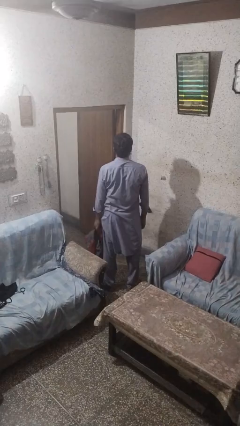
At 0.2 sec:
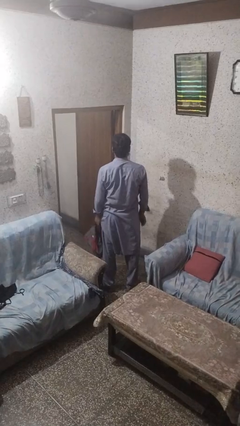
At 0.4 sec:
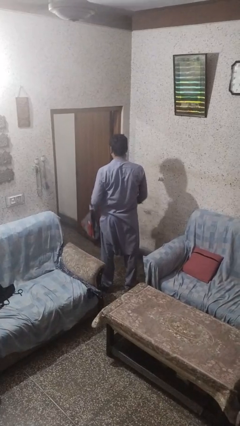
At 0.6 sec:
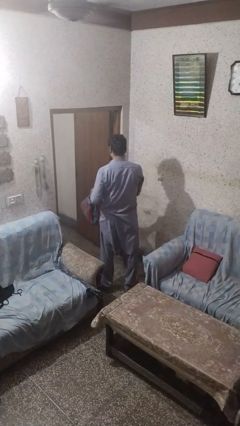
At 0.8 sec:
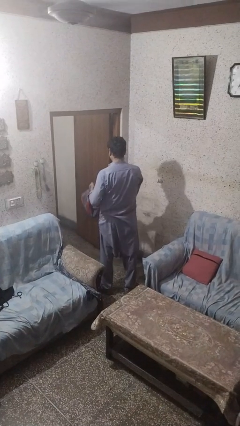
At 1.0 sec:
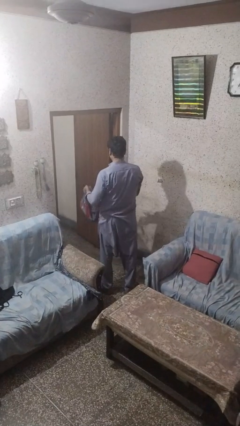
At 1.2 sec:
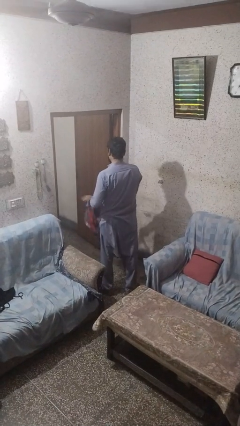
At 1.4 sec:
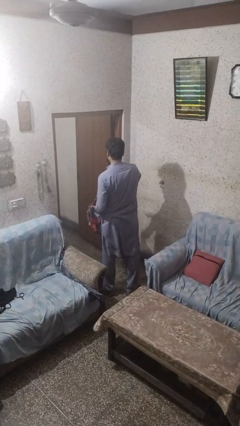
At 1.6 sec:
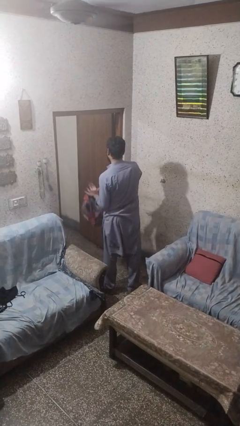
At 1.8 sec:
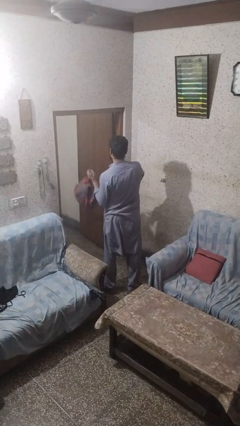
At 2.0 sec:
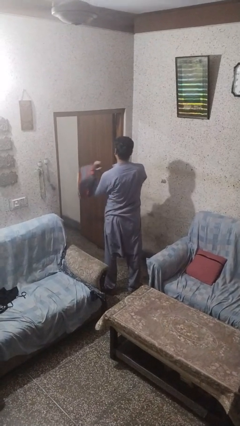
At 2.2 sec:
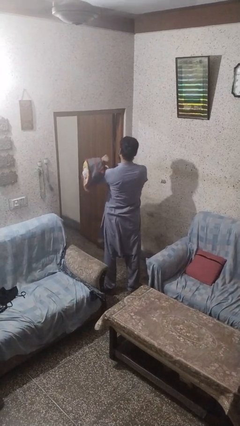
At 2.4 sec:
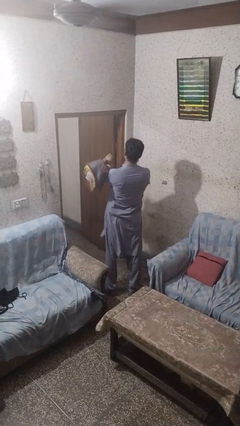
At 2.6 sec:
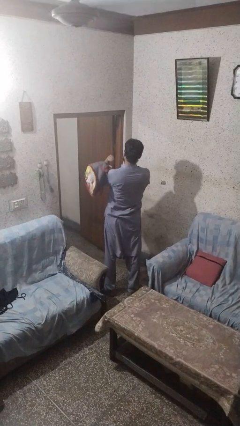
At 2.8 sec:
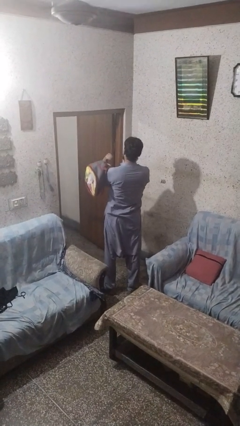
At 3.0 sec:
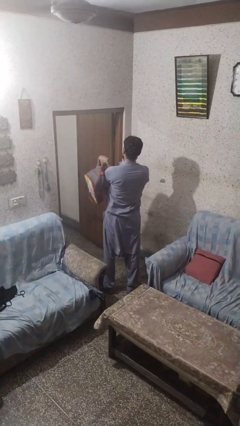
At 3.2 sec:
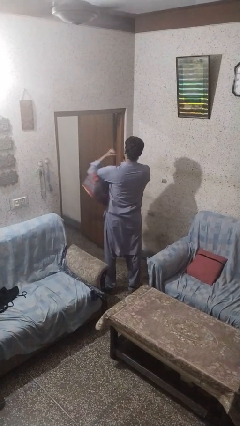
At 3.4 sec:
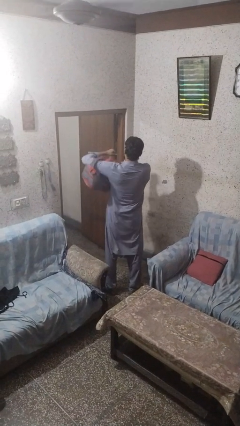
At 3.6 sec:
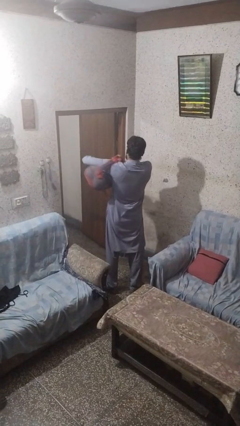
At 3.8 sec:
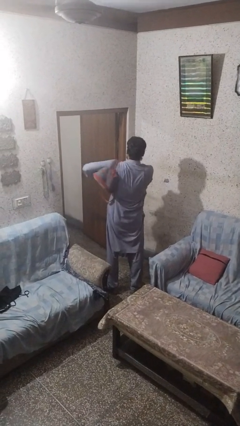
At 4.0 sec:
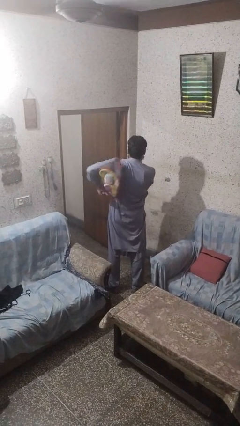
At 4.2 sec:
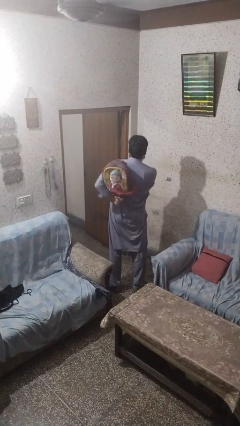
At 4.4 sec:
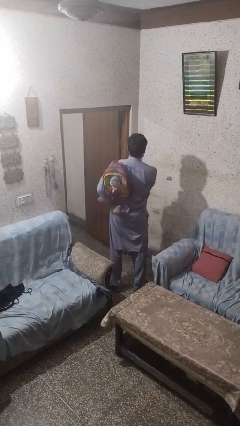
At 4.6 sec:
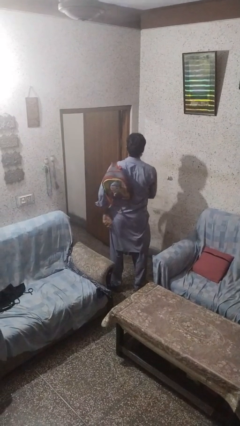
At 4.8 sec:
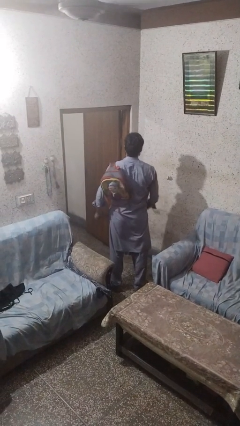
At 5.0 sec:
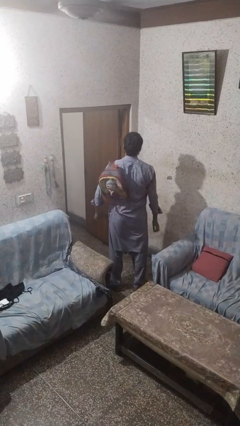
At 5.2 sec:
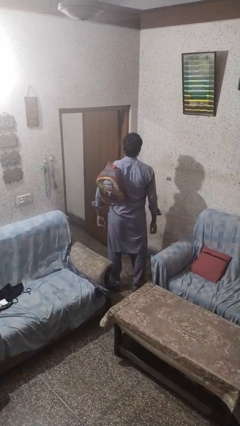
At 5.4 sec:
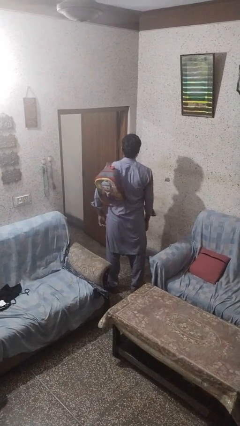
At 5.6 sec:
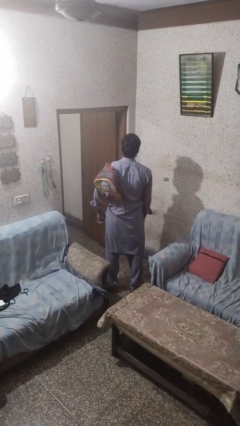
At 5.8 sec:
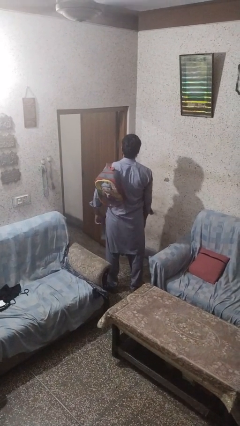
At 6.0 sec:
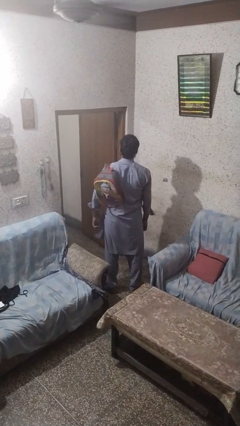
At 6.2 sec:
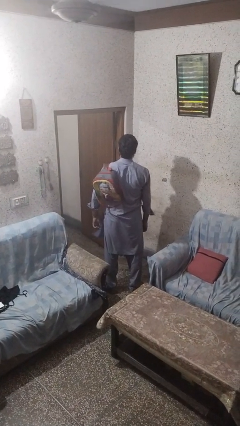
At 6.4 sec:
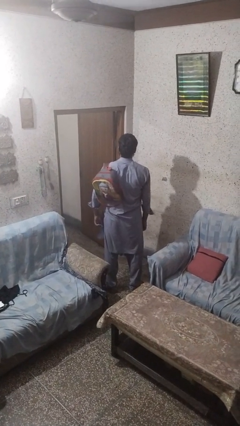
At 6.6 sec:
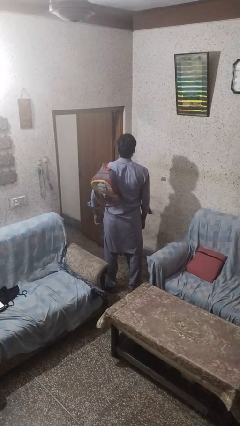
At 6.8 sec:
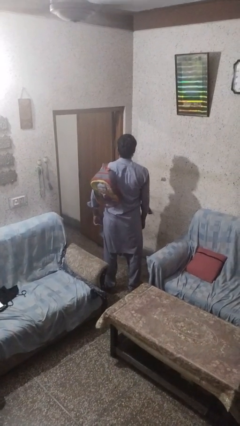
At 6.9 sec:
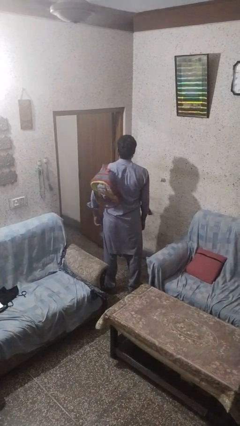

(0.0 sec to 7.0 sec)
person puts on backpack

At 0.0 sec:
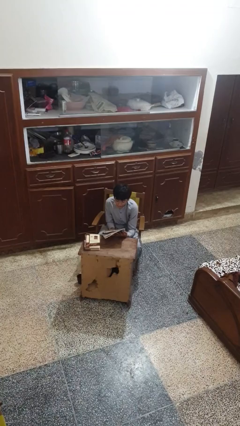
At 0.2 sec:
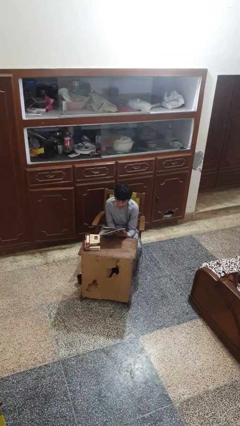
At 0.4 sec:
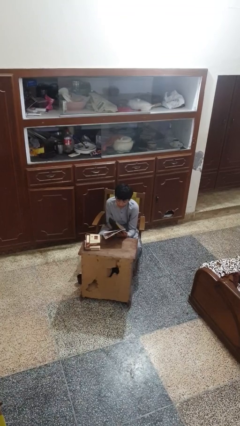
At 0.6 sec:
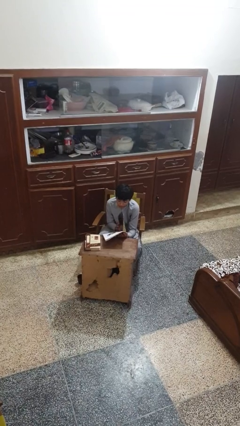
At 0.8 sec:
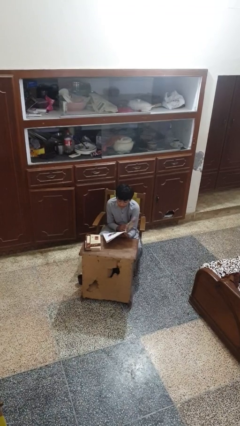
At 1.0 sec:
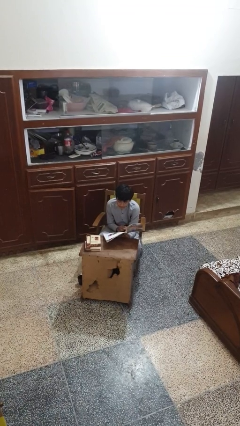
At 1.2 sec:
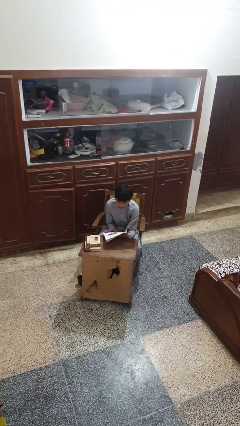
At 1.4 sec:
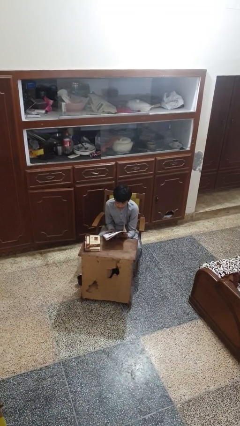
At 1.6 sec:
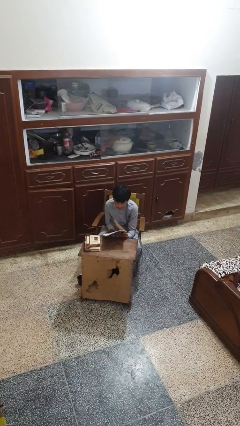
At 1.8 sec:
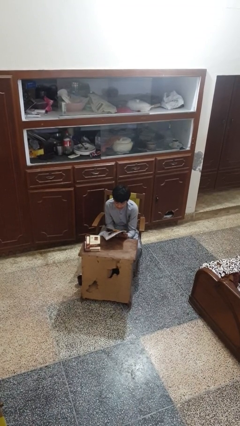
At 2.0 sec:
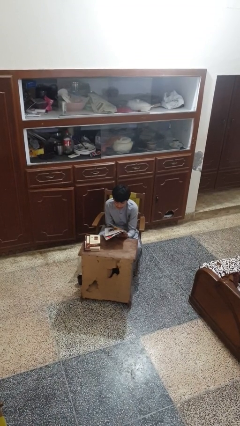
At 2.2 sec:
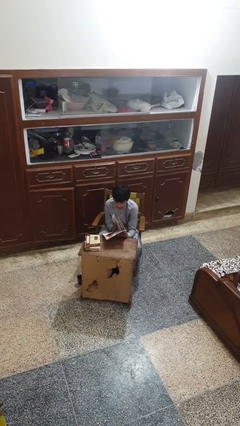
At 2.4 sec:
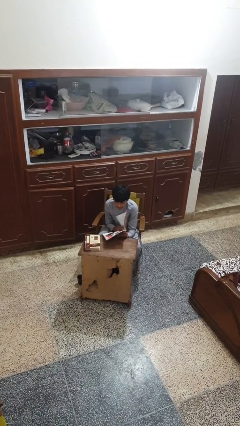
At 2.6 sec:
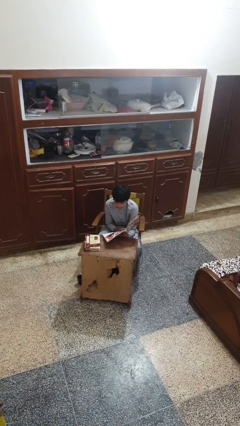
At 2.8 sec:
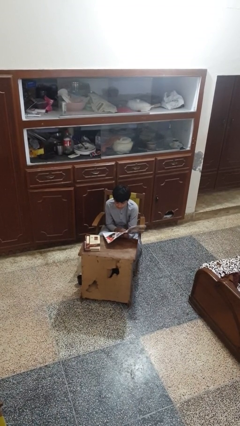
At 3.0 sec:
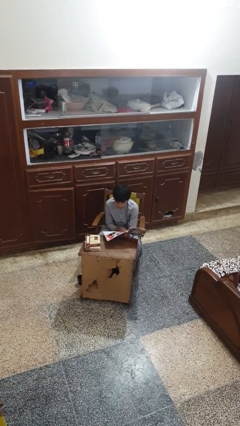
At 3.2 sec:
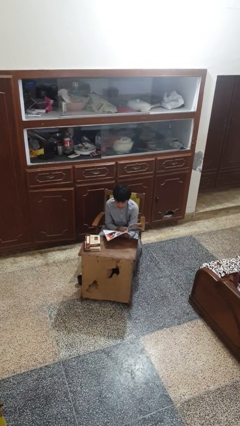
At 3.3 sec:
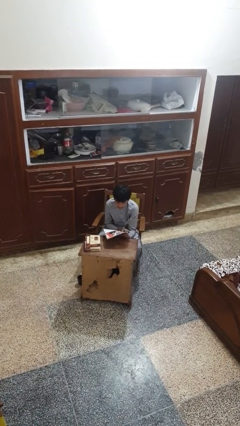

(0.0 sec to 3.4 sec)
person reads magazine

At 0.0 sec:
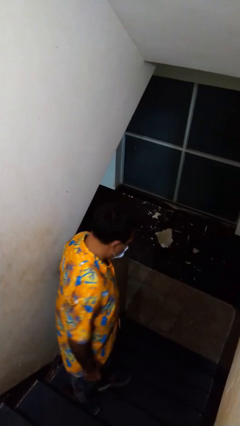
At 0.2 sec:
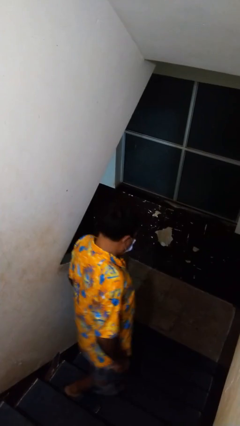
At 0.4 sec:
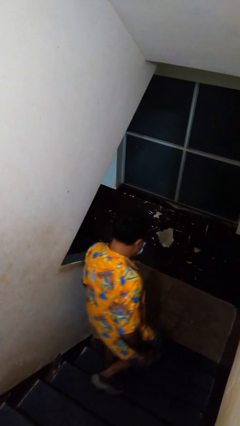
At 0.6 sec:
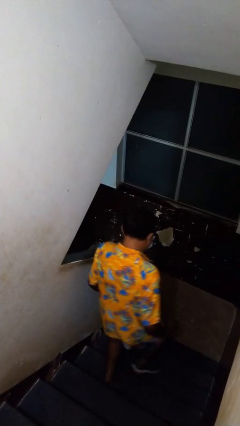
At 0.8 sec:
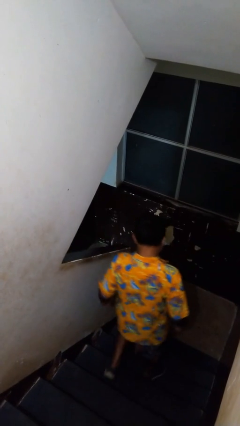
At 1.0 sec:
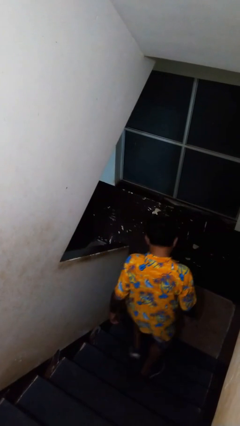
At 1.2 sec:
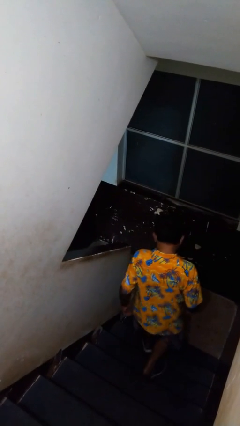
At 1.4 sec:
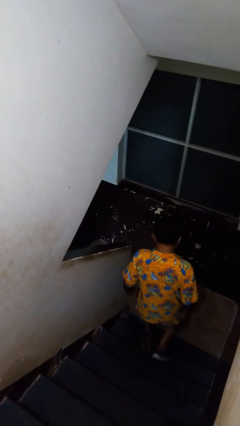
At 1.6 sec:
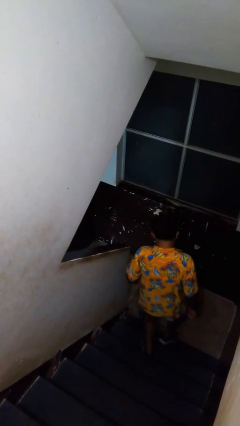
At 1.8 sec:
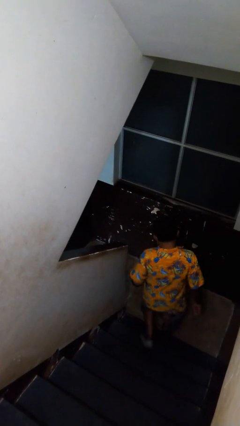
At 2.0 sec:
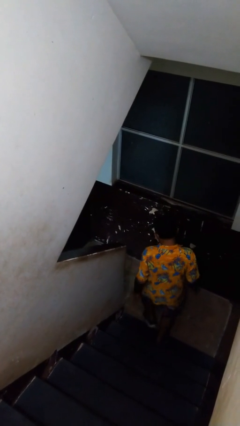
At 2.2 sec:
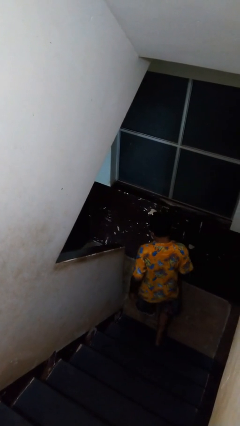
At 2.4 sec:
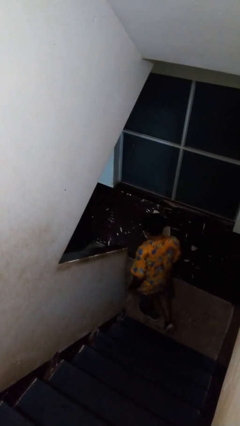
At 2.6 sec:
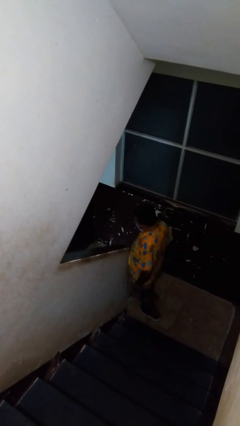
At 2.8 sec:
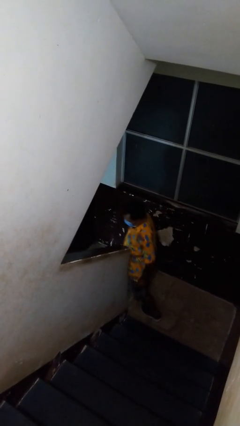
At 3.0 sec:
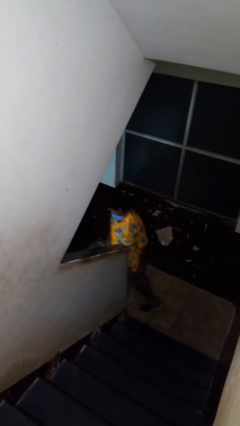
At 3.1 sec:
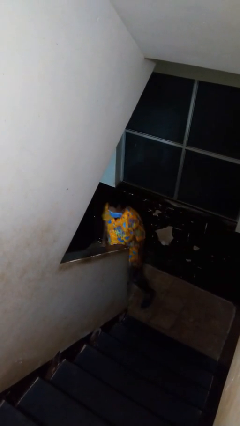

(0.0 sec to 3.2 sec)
person climbs down stairs

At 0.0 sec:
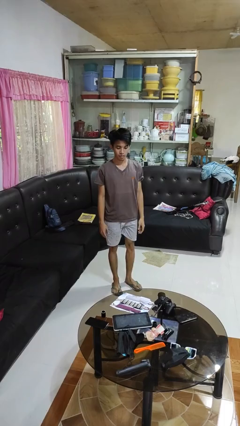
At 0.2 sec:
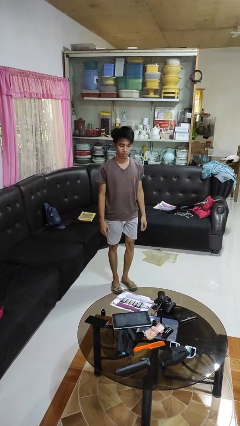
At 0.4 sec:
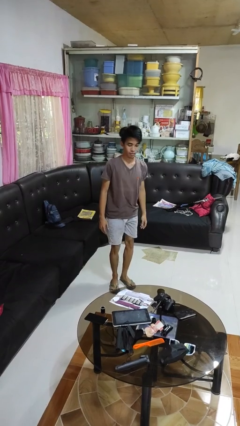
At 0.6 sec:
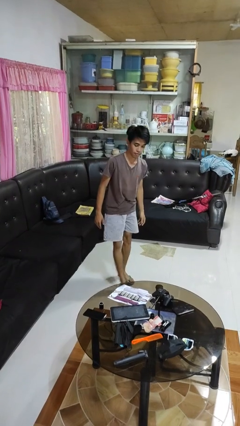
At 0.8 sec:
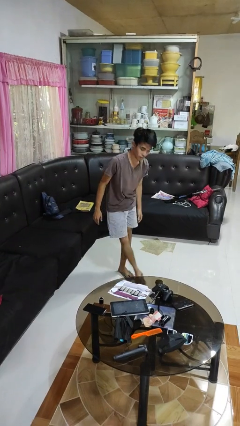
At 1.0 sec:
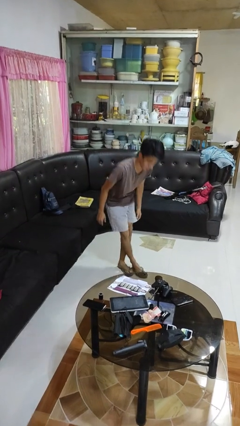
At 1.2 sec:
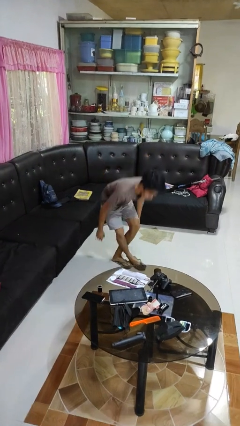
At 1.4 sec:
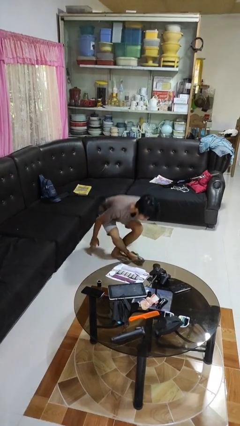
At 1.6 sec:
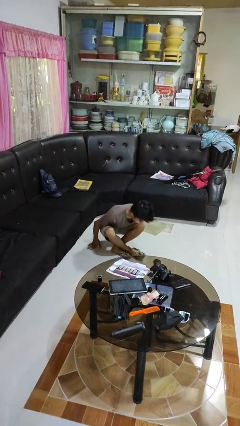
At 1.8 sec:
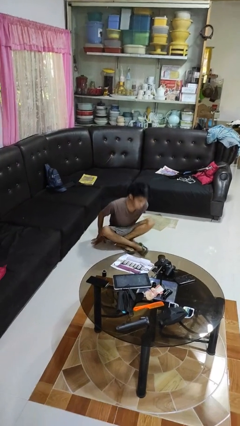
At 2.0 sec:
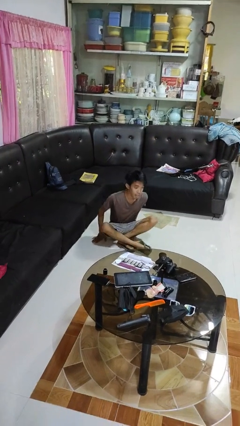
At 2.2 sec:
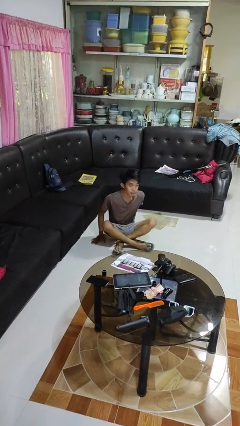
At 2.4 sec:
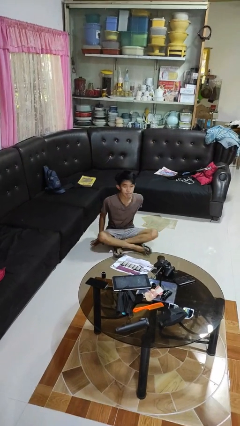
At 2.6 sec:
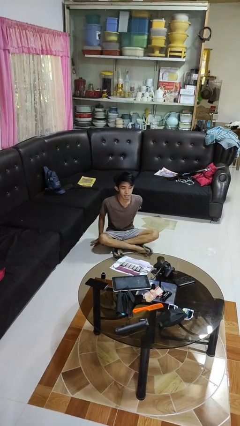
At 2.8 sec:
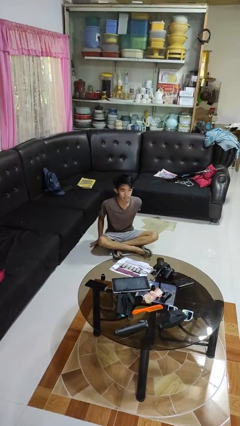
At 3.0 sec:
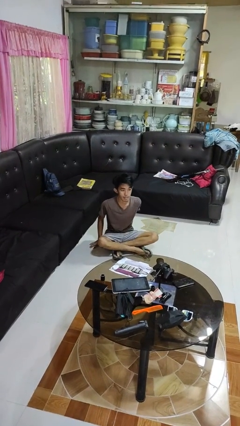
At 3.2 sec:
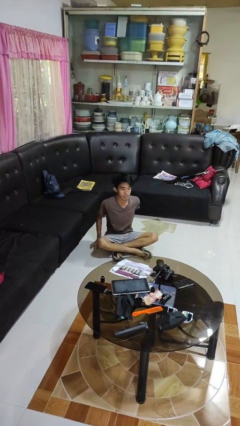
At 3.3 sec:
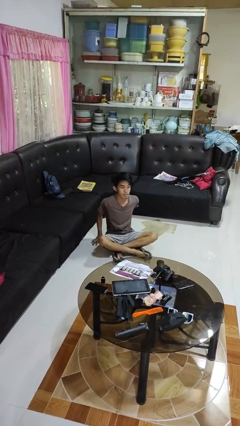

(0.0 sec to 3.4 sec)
person sits crisscross

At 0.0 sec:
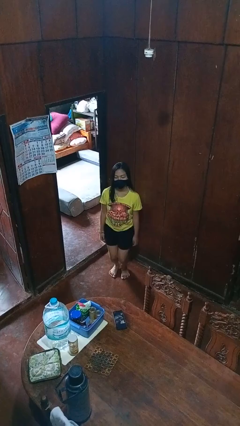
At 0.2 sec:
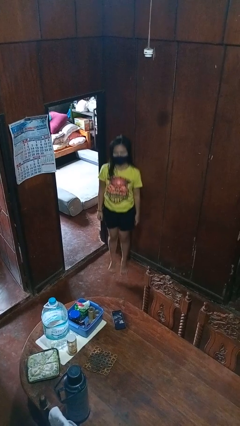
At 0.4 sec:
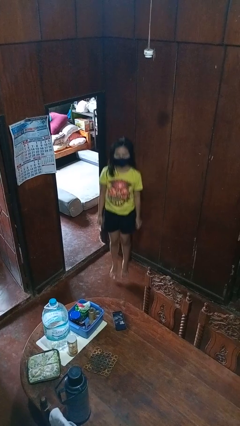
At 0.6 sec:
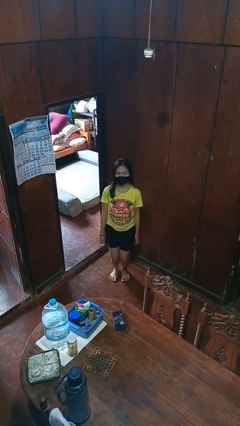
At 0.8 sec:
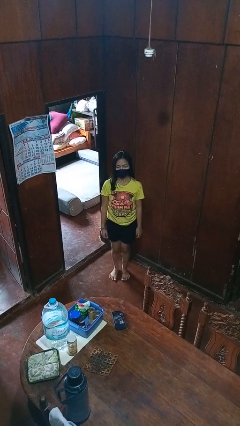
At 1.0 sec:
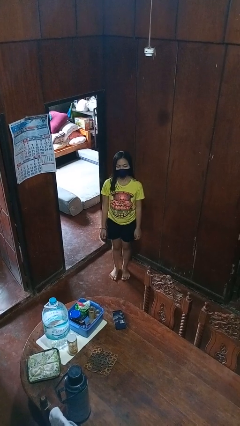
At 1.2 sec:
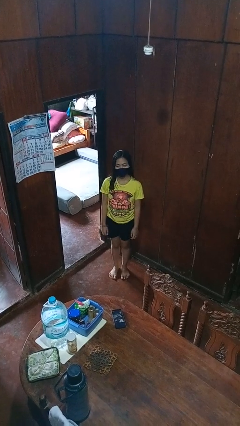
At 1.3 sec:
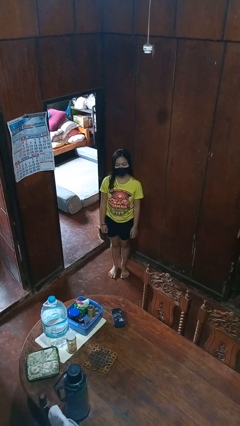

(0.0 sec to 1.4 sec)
person jumps
